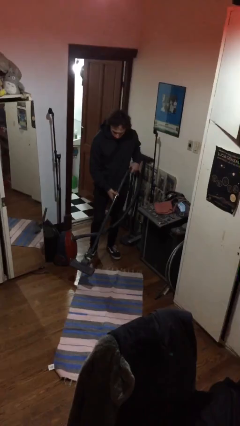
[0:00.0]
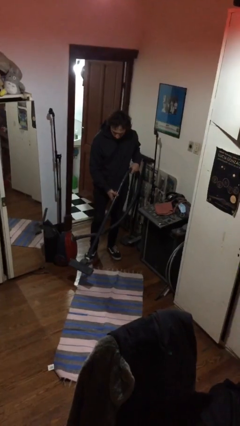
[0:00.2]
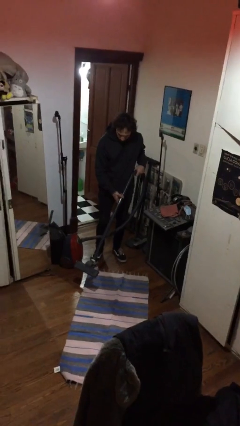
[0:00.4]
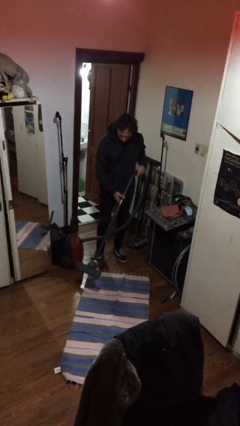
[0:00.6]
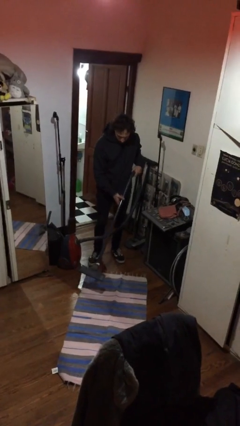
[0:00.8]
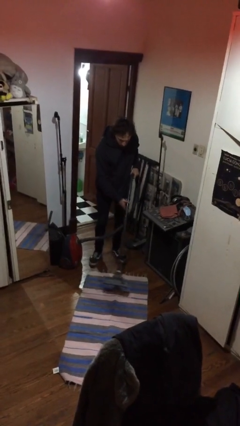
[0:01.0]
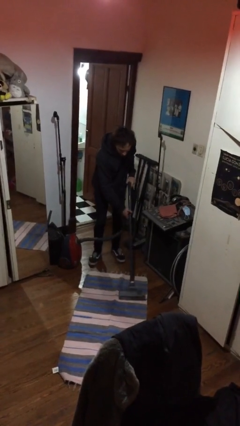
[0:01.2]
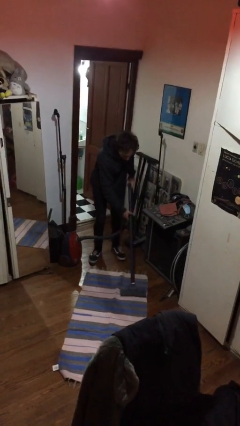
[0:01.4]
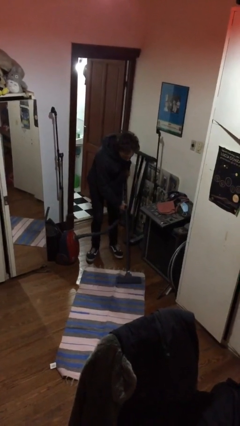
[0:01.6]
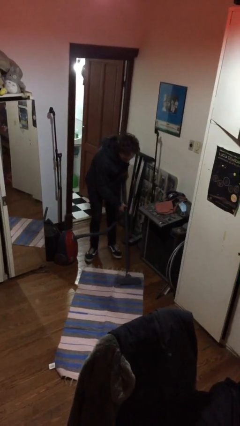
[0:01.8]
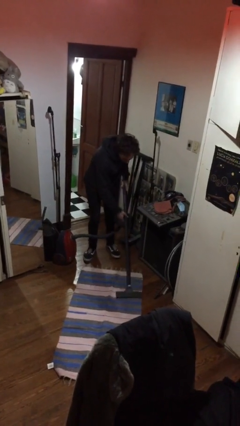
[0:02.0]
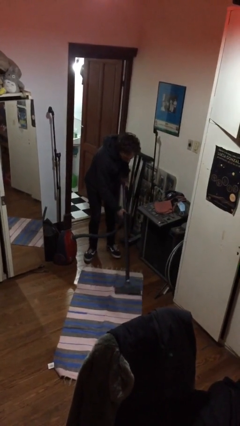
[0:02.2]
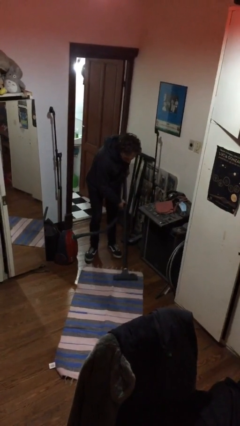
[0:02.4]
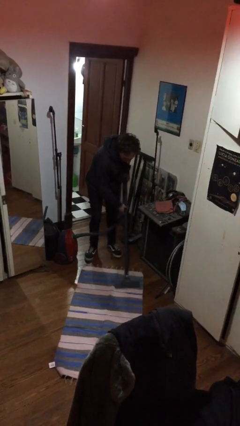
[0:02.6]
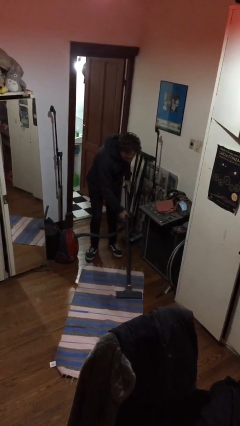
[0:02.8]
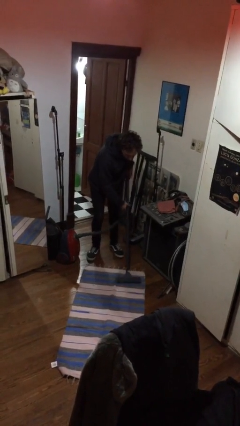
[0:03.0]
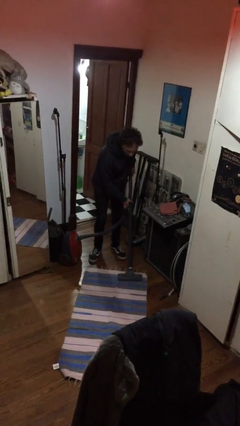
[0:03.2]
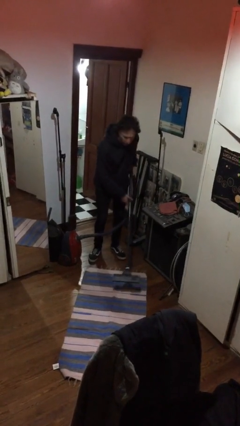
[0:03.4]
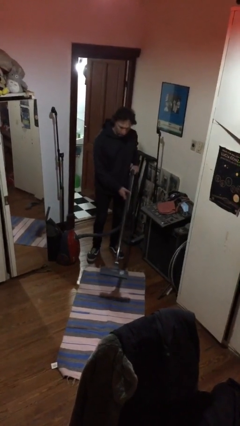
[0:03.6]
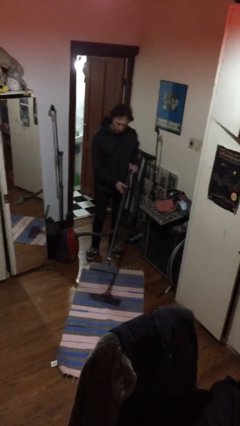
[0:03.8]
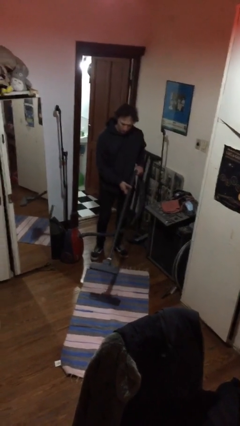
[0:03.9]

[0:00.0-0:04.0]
person vacuums carpet

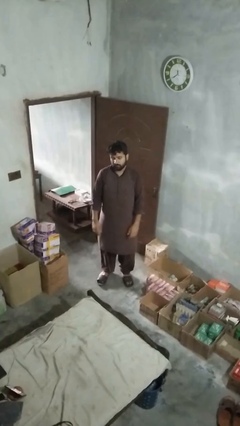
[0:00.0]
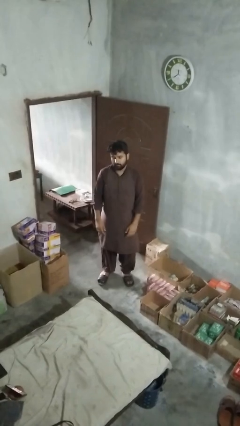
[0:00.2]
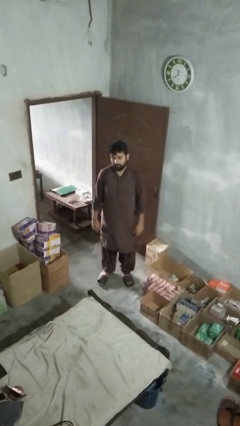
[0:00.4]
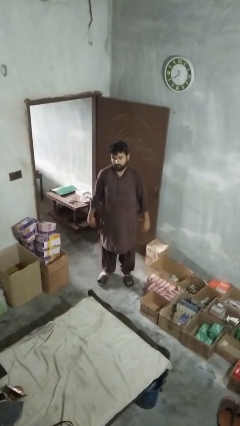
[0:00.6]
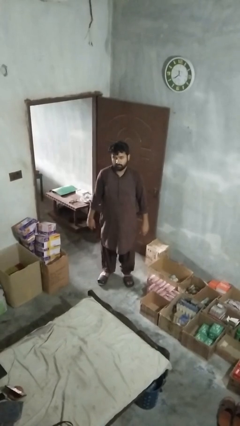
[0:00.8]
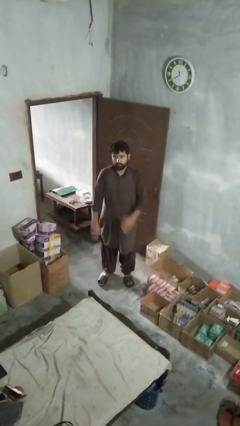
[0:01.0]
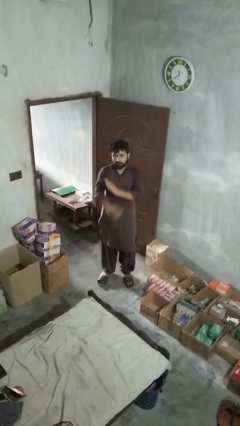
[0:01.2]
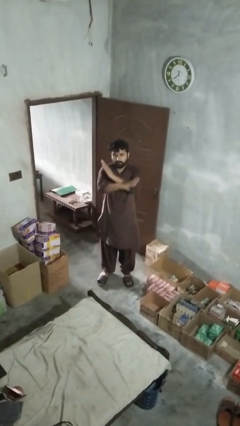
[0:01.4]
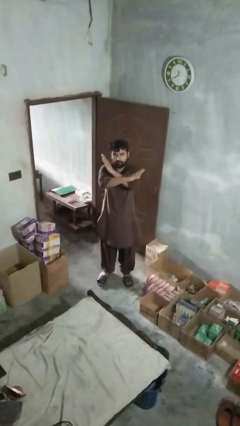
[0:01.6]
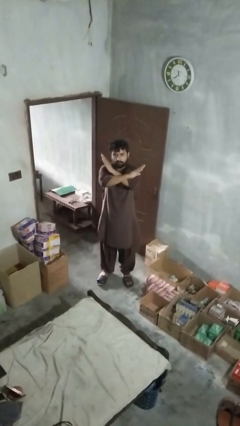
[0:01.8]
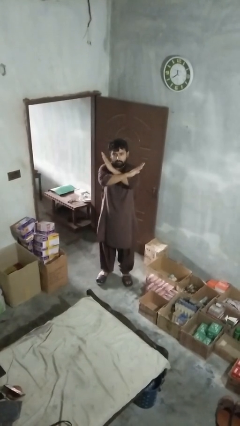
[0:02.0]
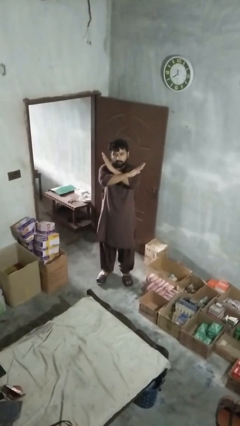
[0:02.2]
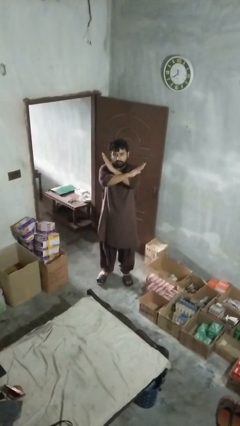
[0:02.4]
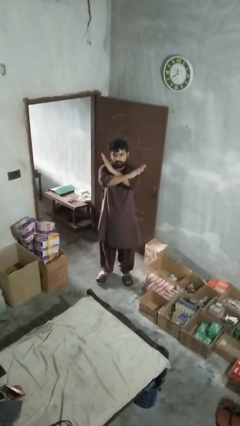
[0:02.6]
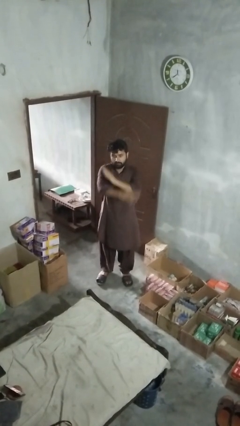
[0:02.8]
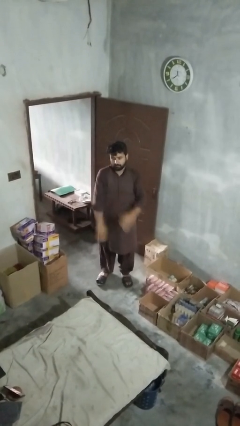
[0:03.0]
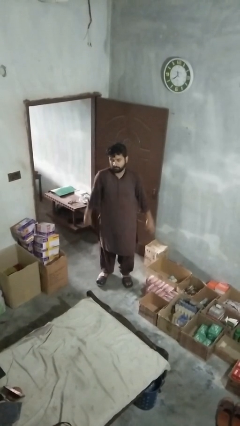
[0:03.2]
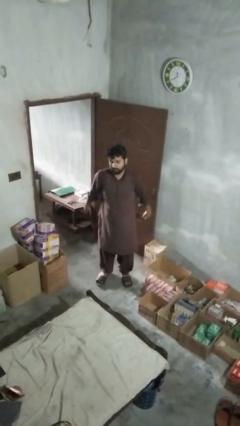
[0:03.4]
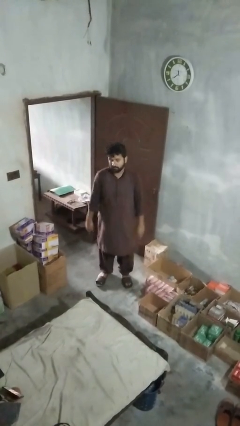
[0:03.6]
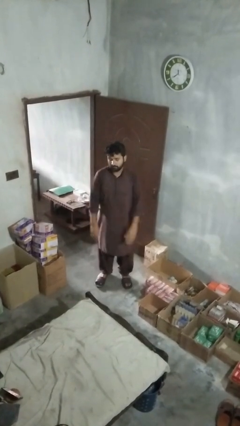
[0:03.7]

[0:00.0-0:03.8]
person gestures arms x

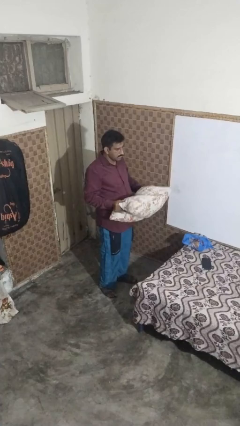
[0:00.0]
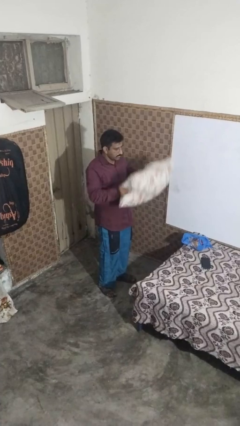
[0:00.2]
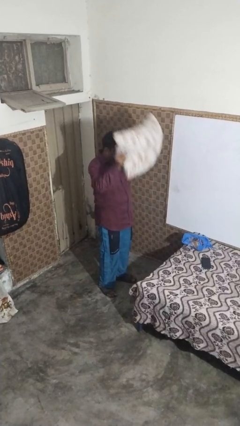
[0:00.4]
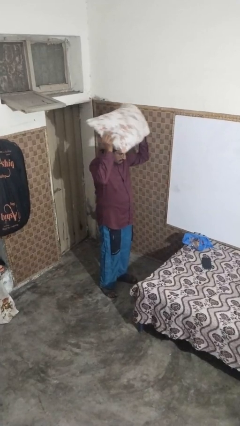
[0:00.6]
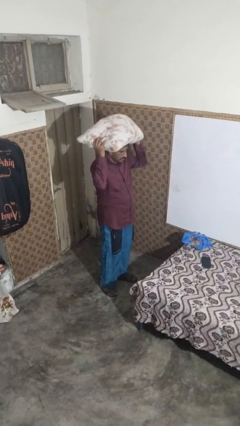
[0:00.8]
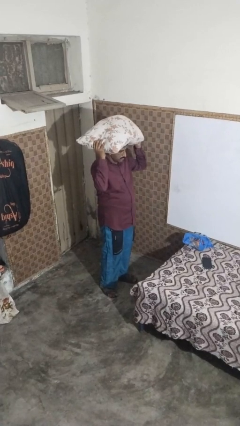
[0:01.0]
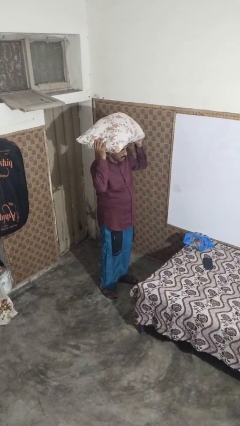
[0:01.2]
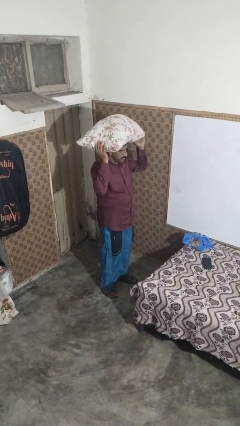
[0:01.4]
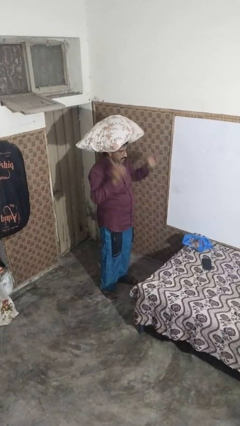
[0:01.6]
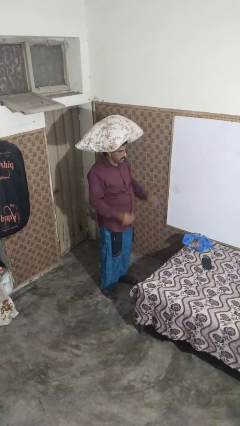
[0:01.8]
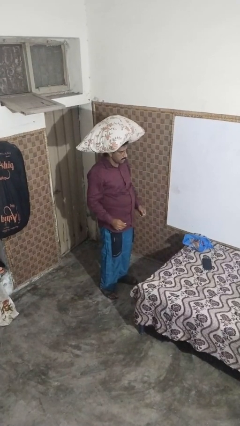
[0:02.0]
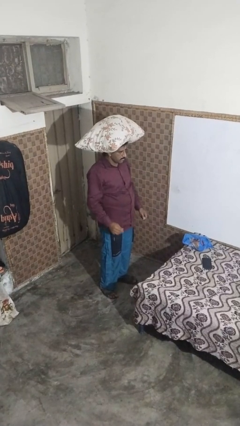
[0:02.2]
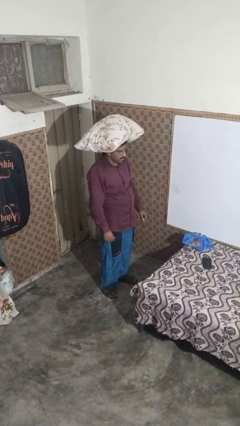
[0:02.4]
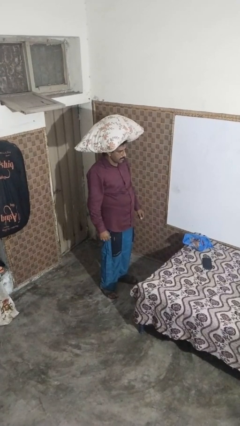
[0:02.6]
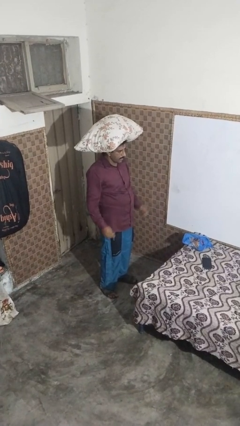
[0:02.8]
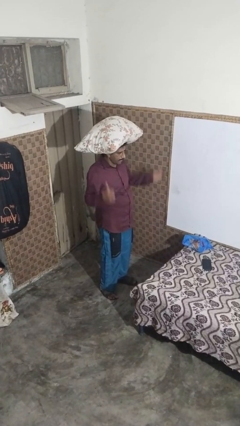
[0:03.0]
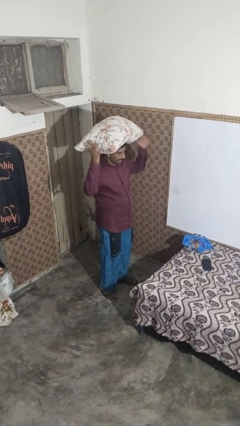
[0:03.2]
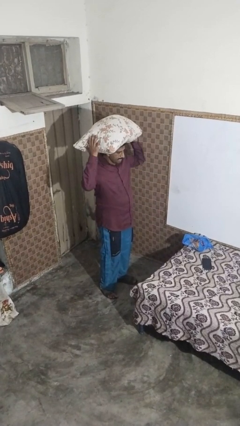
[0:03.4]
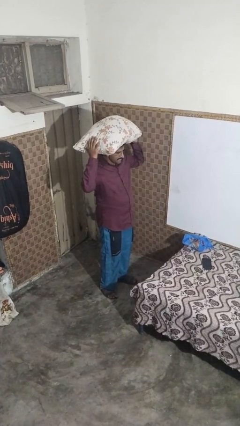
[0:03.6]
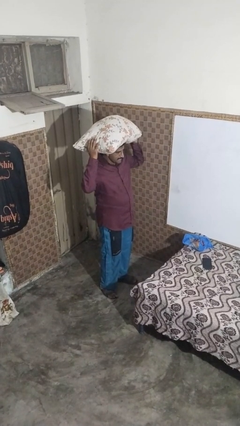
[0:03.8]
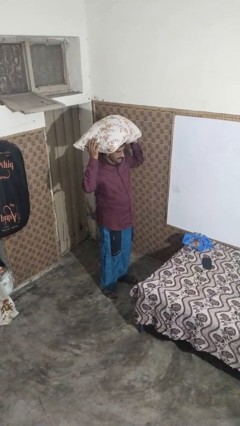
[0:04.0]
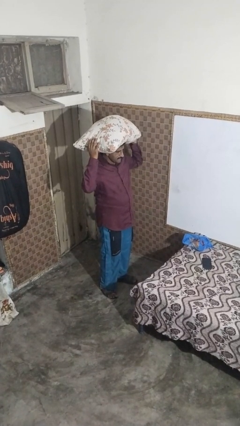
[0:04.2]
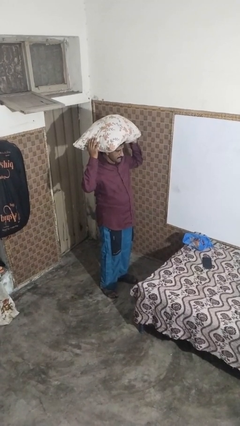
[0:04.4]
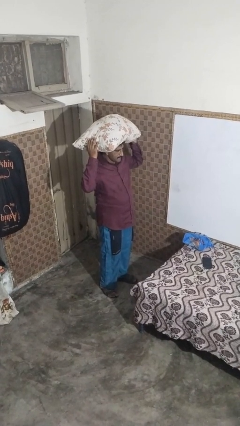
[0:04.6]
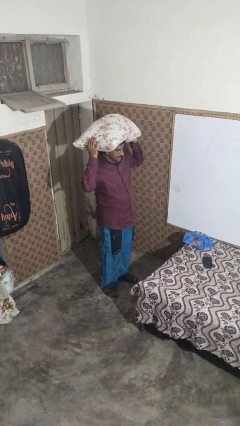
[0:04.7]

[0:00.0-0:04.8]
person holds object above head

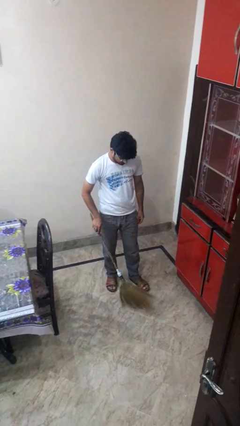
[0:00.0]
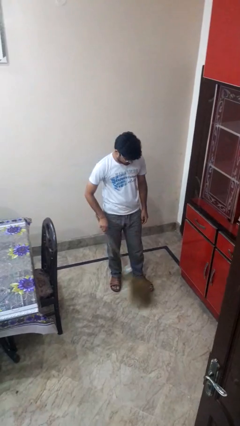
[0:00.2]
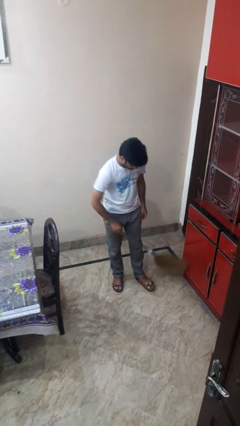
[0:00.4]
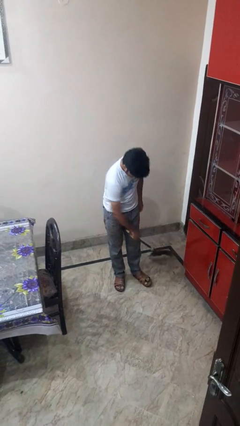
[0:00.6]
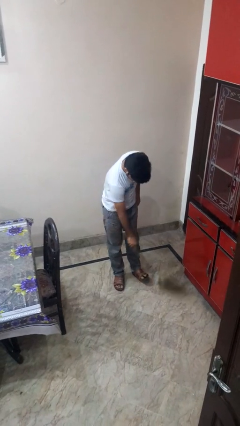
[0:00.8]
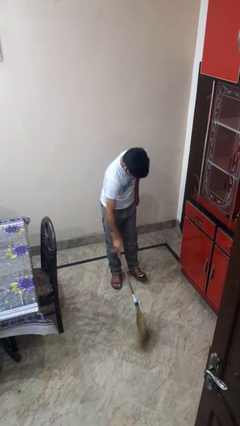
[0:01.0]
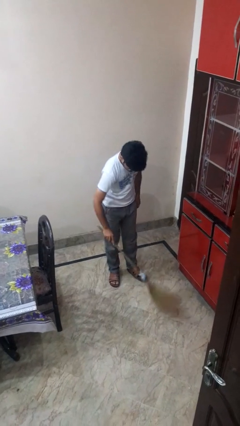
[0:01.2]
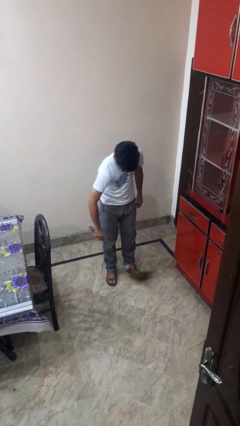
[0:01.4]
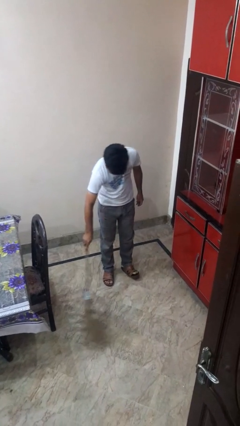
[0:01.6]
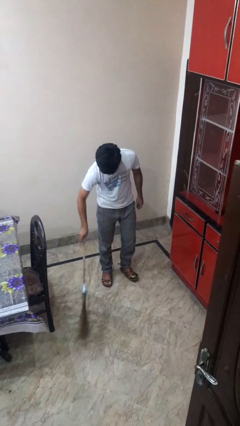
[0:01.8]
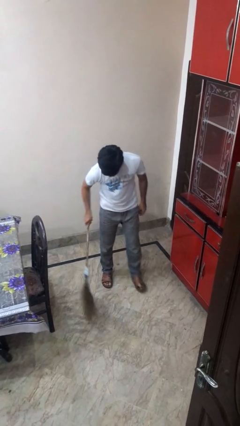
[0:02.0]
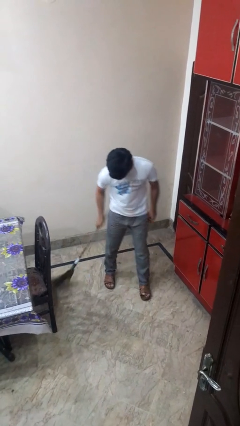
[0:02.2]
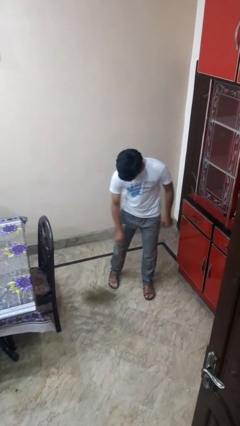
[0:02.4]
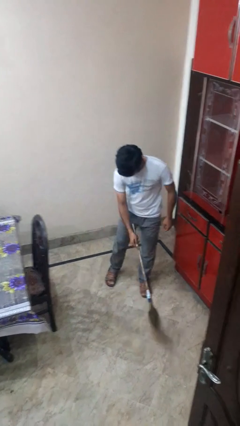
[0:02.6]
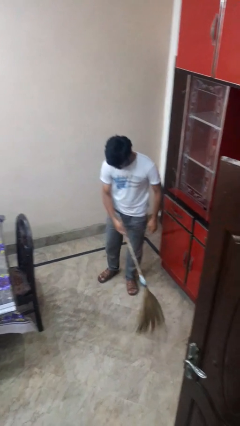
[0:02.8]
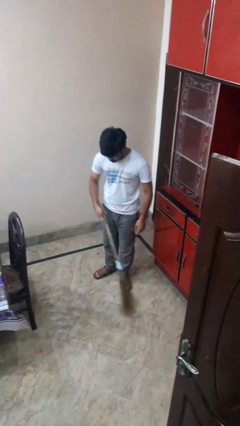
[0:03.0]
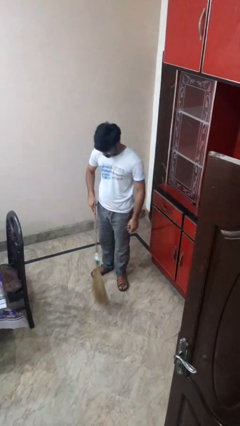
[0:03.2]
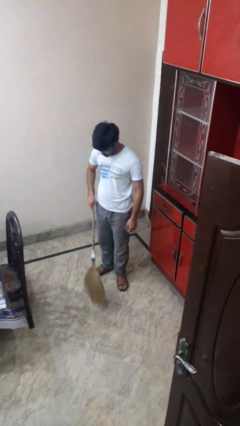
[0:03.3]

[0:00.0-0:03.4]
person sweeps floor

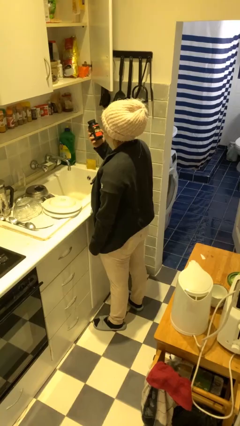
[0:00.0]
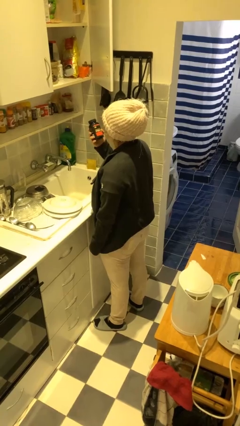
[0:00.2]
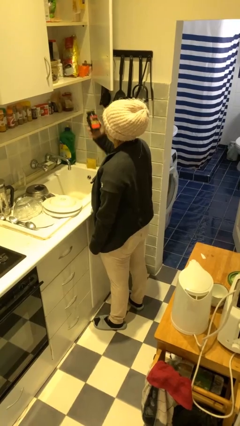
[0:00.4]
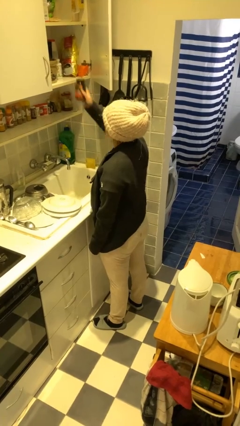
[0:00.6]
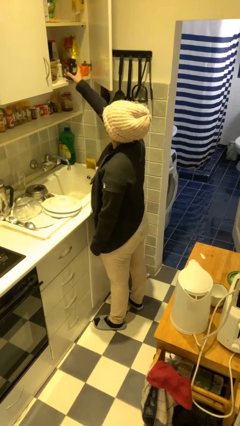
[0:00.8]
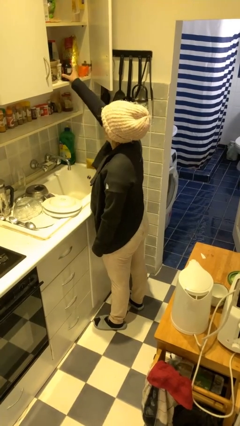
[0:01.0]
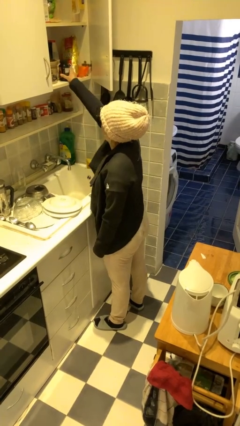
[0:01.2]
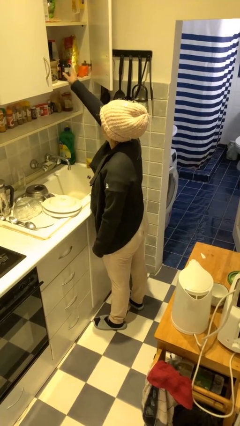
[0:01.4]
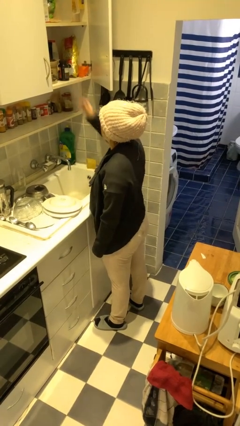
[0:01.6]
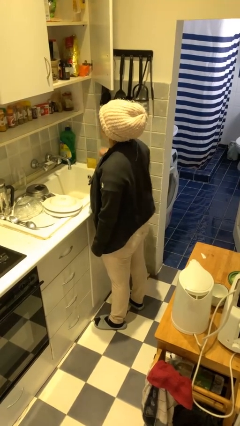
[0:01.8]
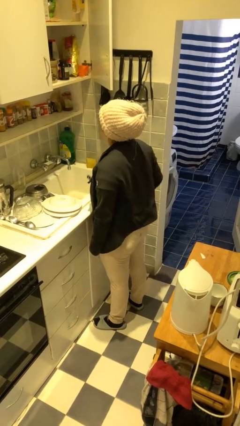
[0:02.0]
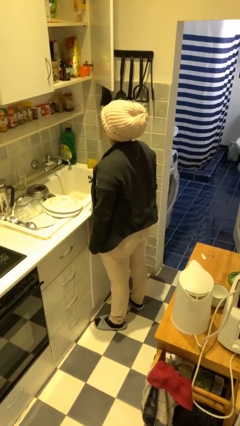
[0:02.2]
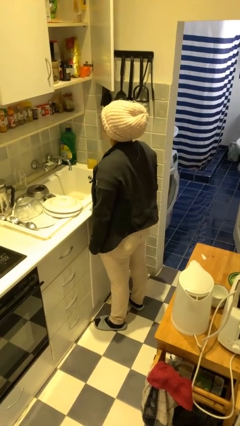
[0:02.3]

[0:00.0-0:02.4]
person puts down object into cabinet
